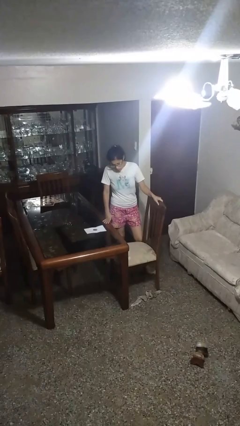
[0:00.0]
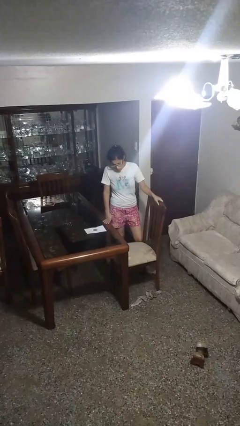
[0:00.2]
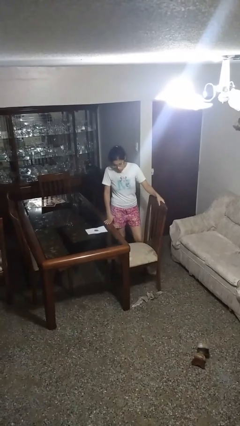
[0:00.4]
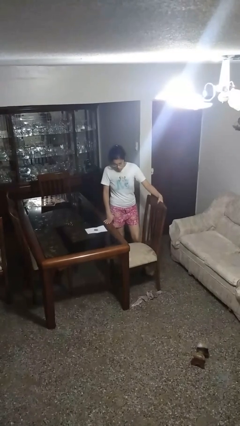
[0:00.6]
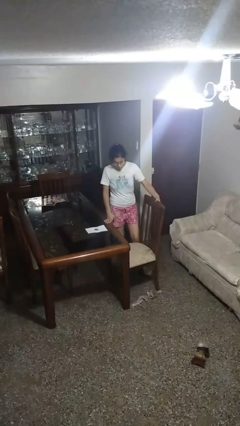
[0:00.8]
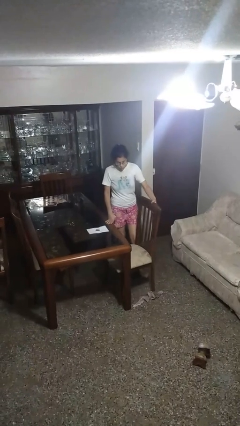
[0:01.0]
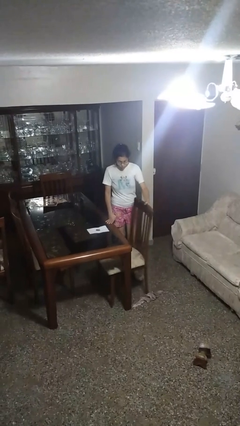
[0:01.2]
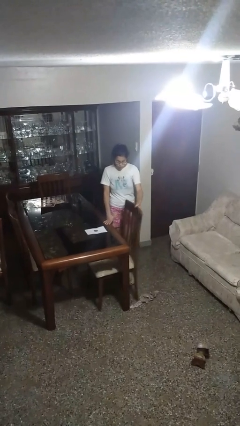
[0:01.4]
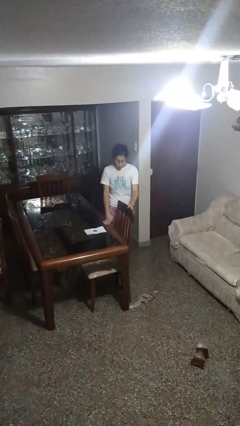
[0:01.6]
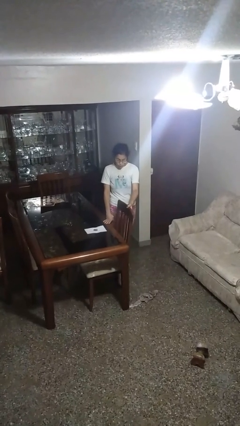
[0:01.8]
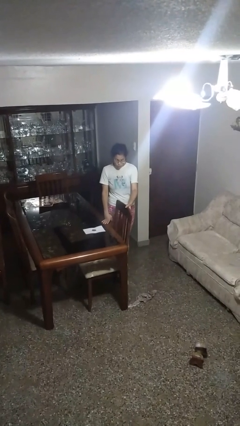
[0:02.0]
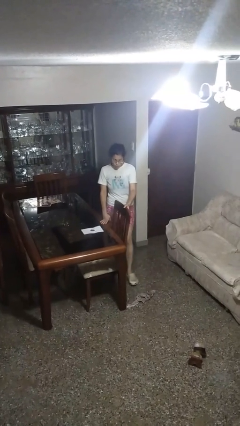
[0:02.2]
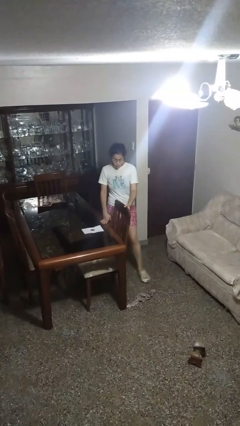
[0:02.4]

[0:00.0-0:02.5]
person pushes in chair

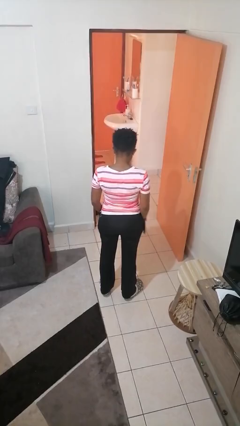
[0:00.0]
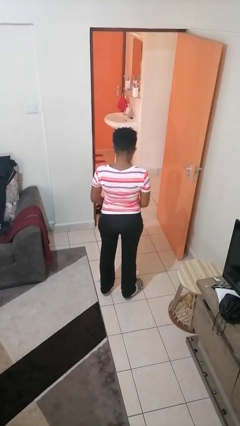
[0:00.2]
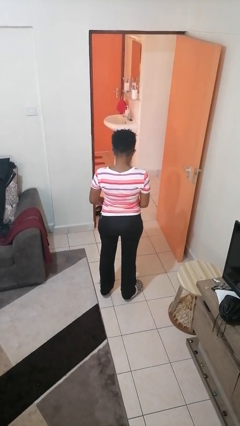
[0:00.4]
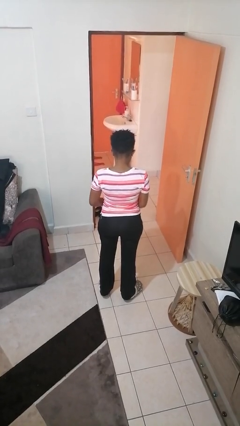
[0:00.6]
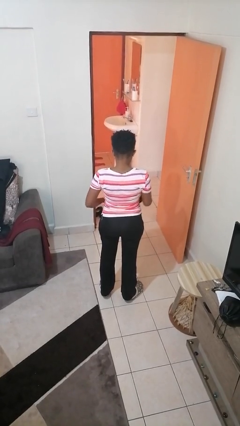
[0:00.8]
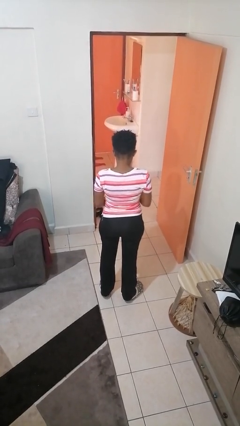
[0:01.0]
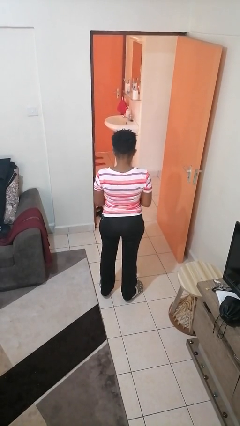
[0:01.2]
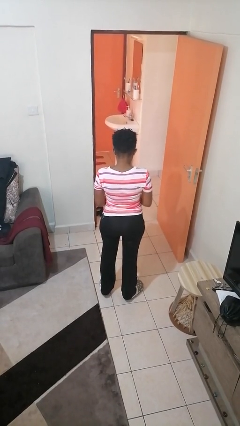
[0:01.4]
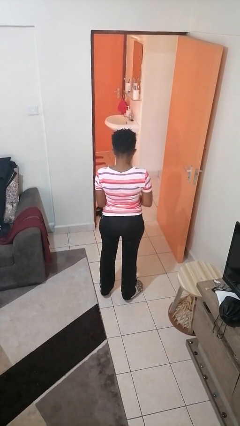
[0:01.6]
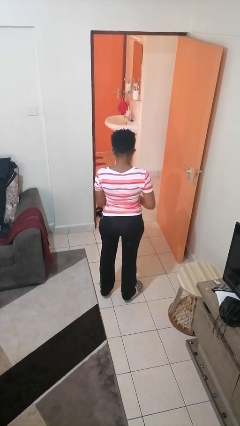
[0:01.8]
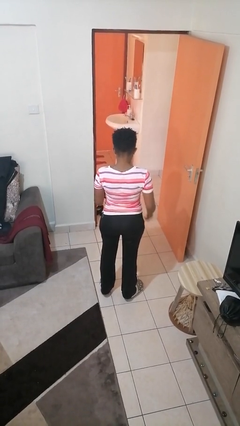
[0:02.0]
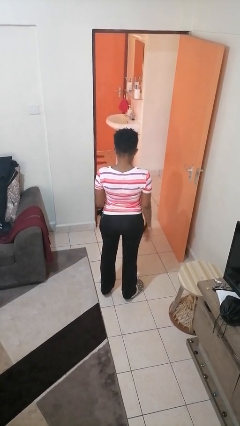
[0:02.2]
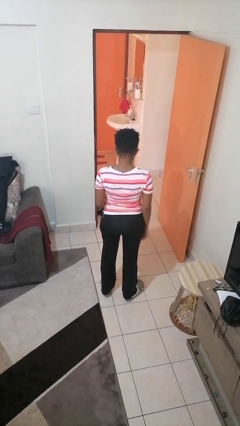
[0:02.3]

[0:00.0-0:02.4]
person takes off gloves

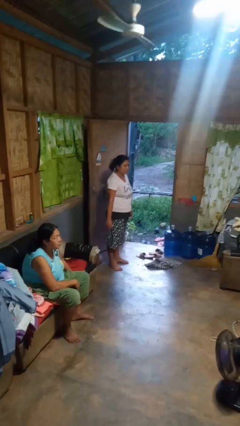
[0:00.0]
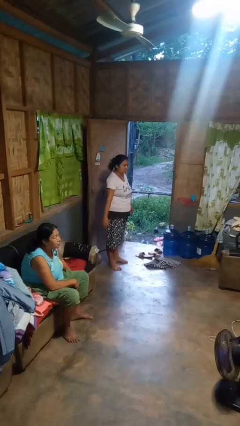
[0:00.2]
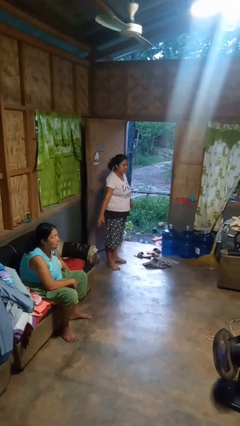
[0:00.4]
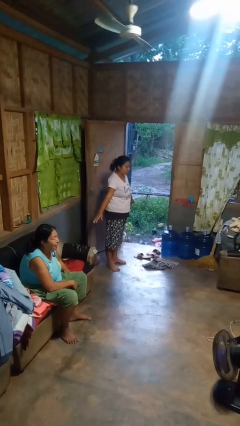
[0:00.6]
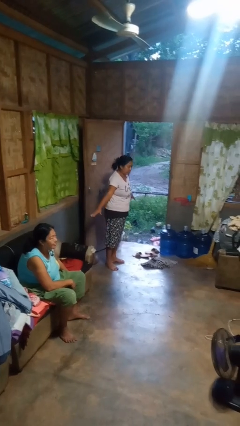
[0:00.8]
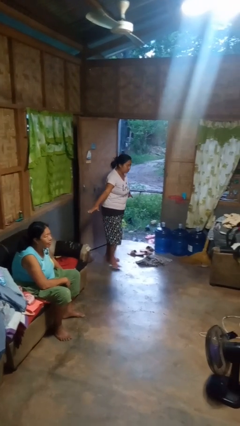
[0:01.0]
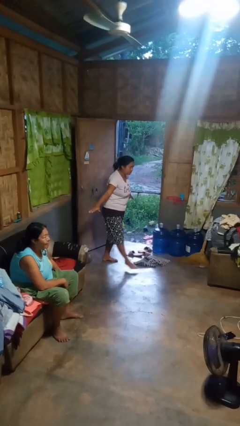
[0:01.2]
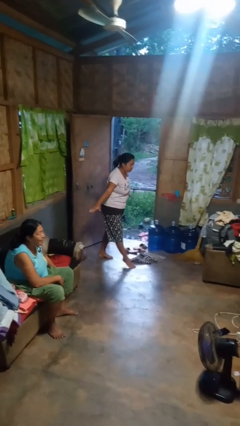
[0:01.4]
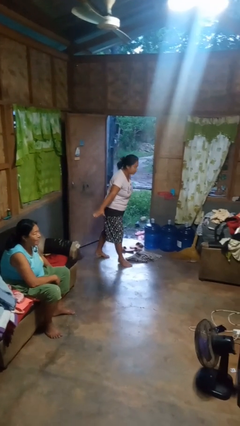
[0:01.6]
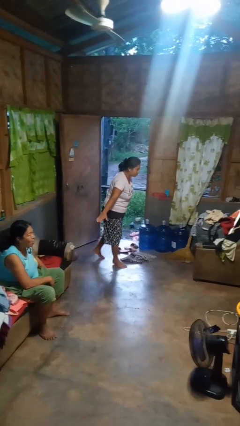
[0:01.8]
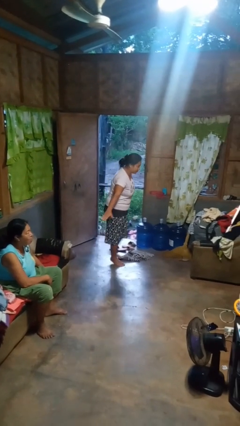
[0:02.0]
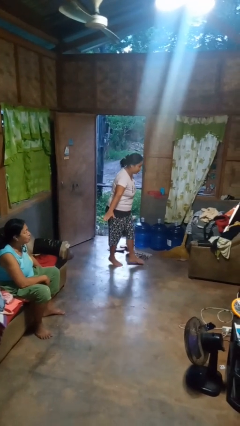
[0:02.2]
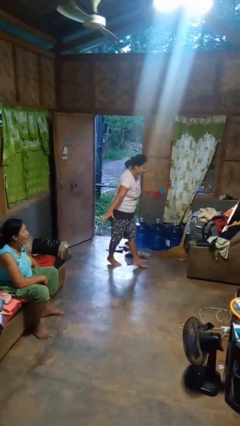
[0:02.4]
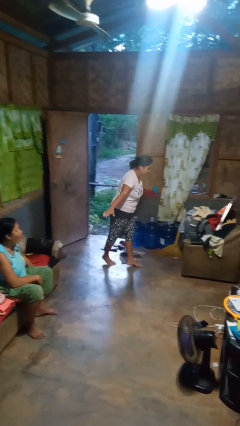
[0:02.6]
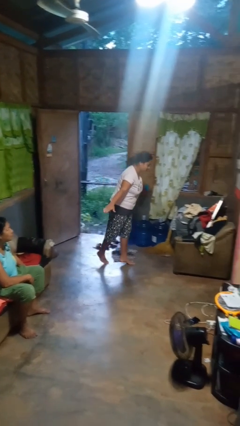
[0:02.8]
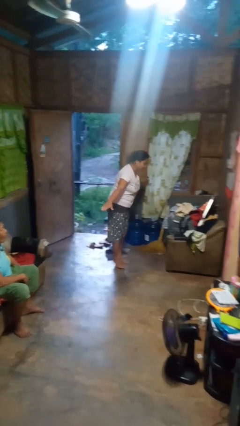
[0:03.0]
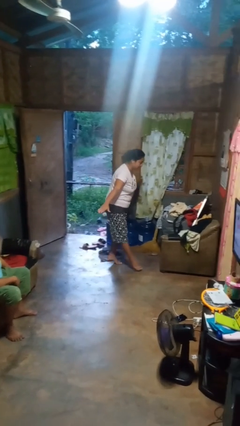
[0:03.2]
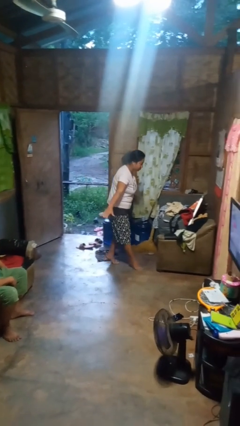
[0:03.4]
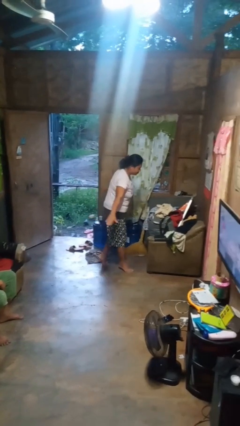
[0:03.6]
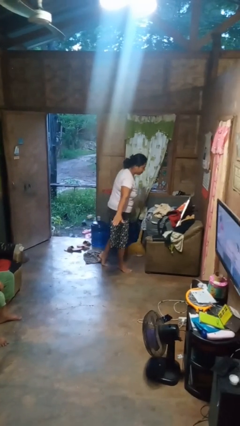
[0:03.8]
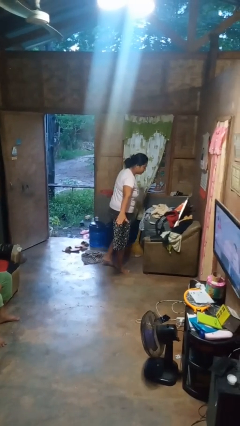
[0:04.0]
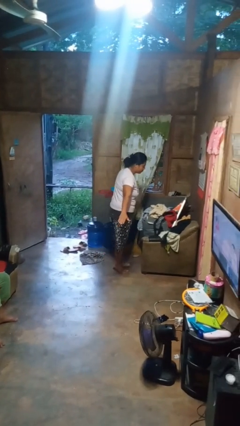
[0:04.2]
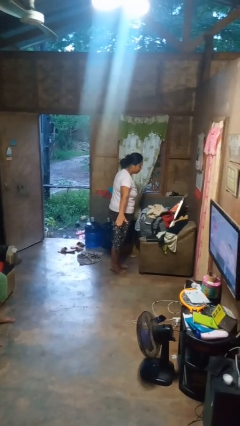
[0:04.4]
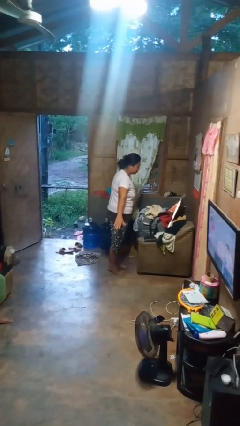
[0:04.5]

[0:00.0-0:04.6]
person walks tiptoe

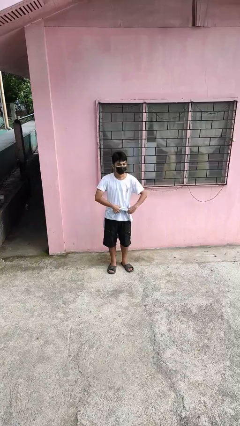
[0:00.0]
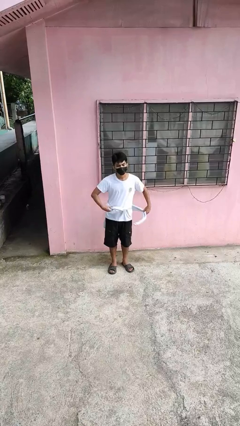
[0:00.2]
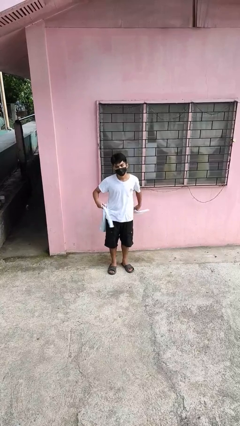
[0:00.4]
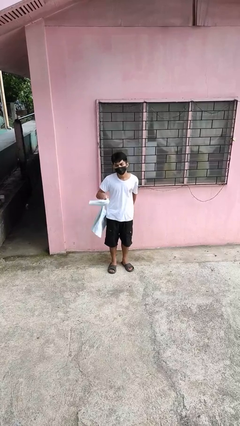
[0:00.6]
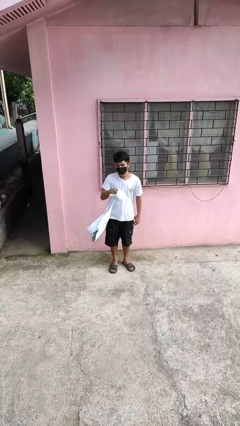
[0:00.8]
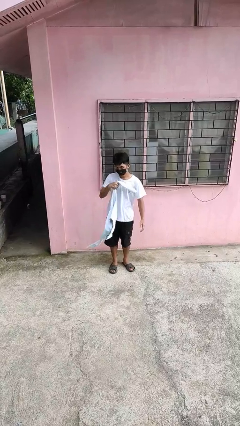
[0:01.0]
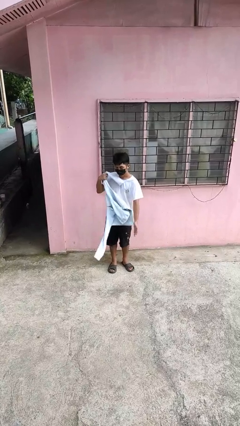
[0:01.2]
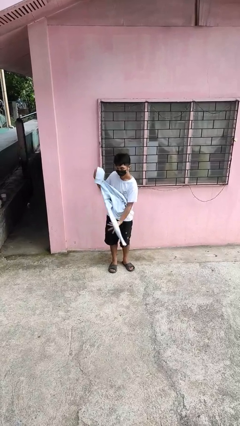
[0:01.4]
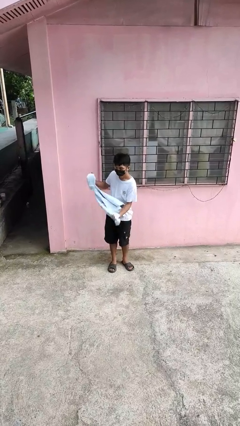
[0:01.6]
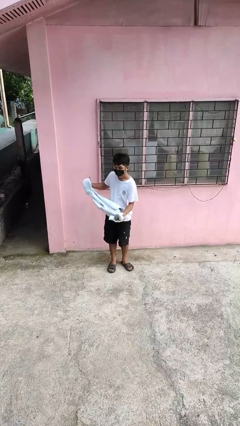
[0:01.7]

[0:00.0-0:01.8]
person unties jacket around waist

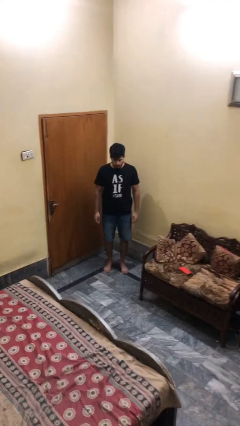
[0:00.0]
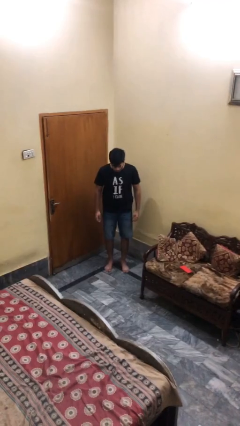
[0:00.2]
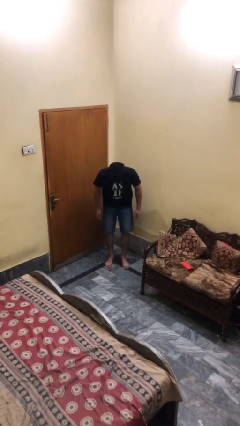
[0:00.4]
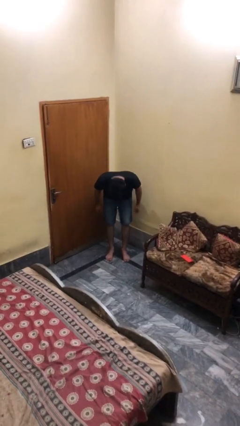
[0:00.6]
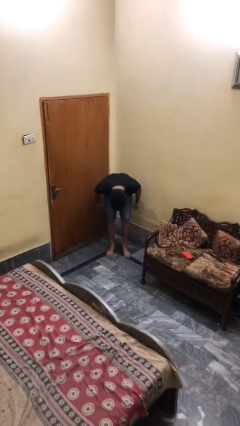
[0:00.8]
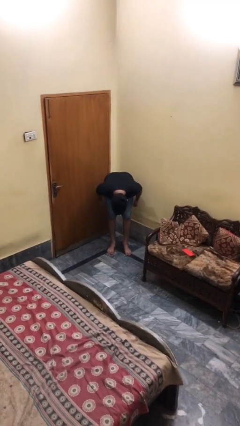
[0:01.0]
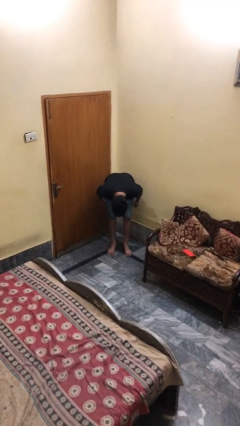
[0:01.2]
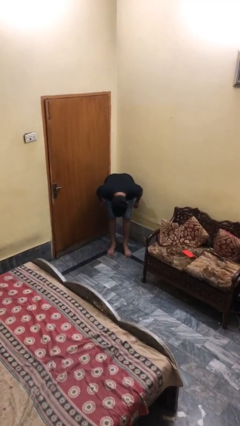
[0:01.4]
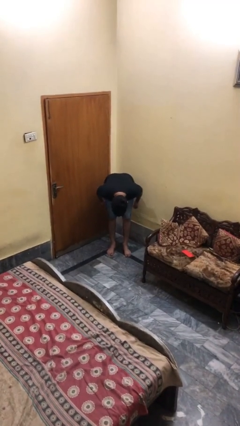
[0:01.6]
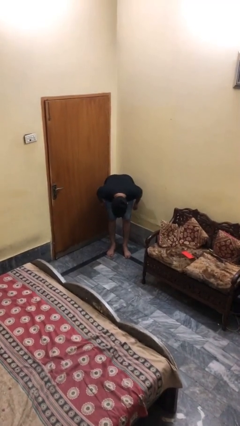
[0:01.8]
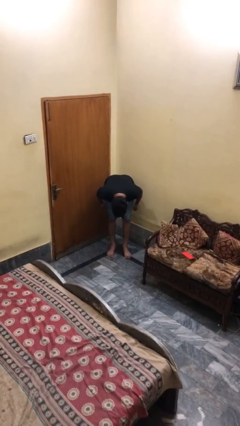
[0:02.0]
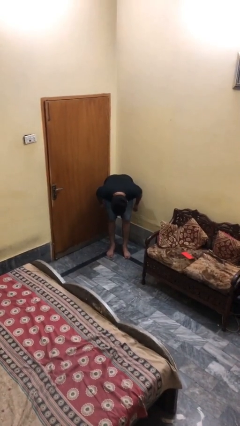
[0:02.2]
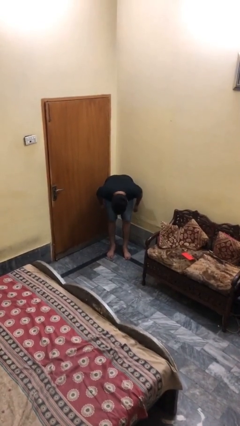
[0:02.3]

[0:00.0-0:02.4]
person bows

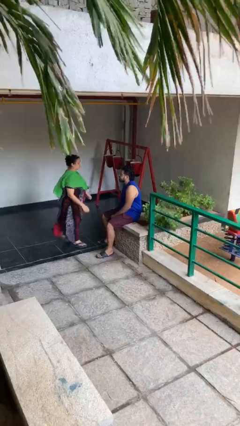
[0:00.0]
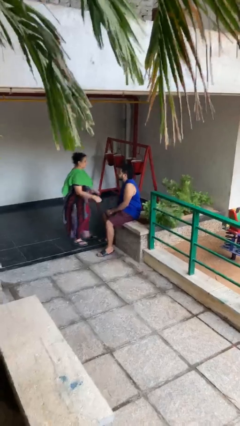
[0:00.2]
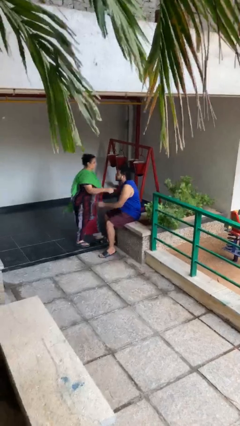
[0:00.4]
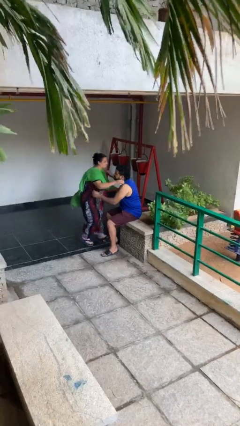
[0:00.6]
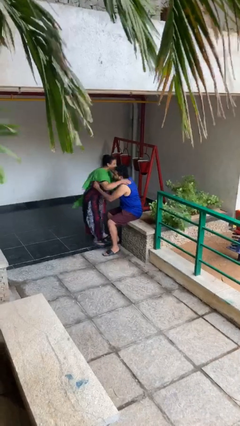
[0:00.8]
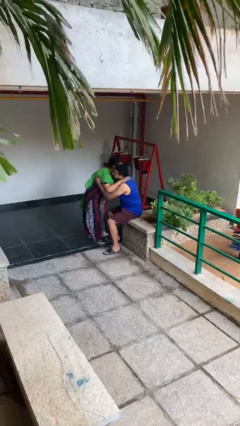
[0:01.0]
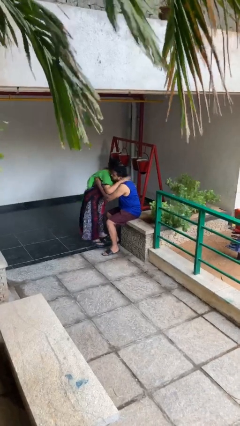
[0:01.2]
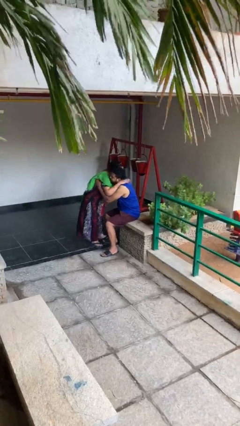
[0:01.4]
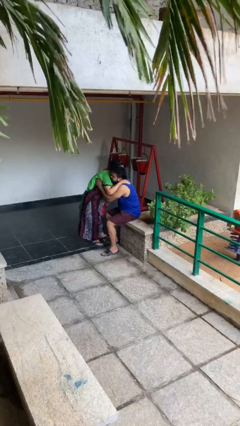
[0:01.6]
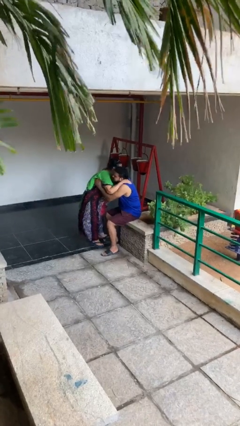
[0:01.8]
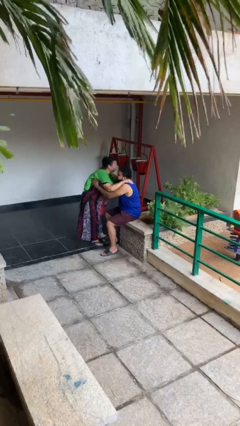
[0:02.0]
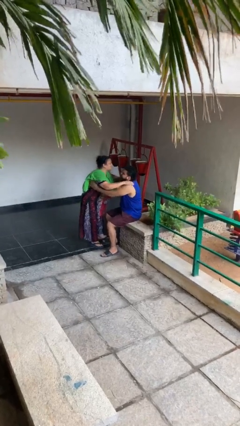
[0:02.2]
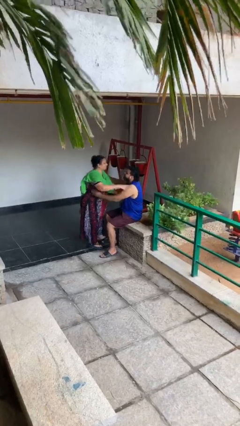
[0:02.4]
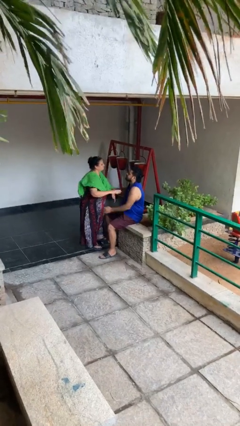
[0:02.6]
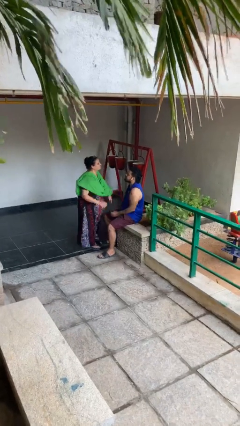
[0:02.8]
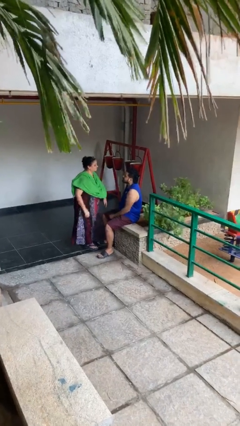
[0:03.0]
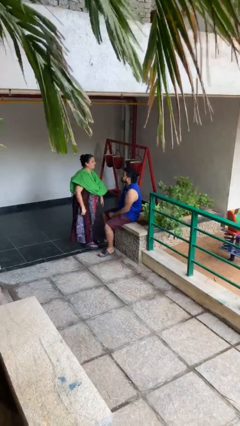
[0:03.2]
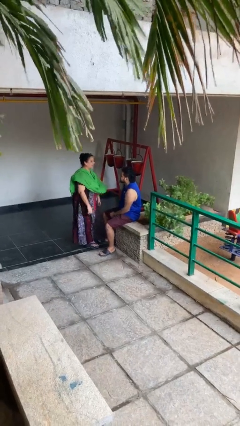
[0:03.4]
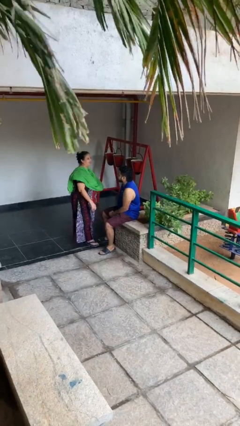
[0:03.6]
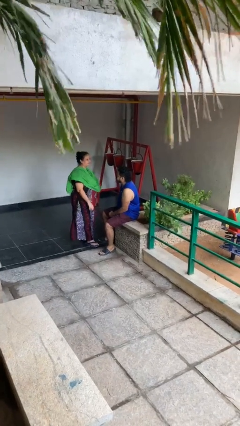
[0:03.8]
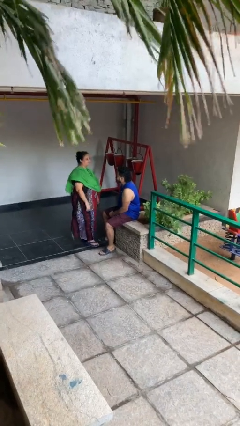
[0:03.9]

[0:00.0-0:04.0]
person embraces person
